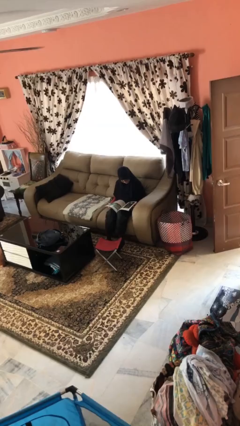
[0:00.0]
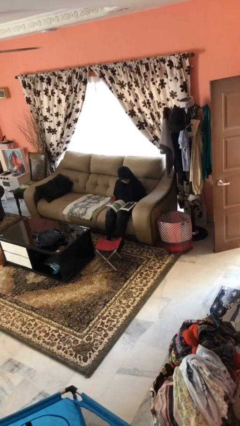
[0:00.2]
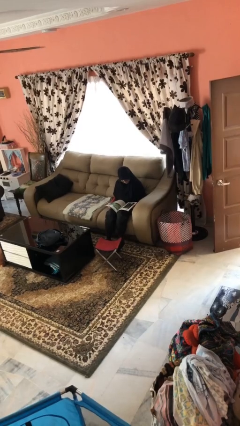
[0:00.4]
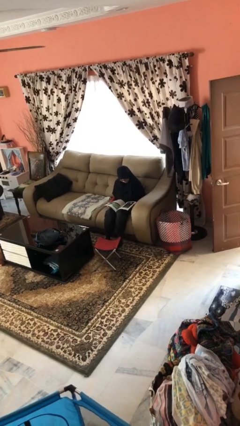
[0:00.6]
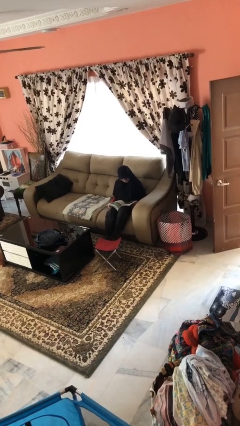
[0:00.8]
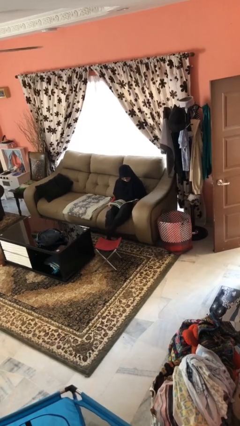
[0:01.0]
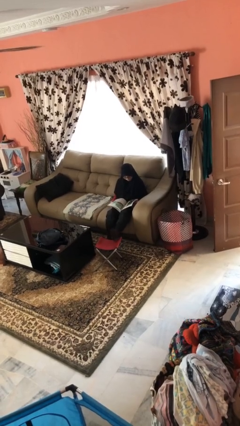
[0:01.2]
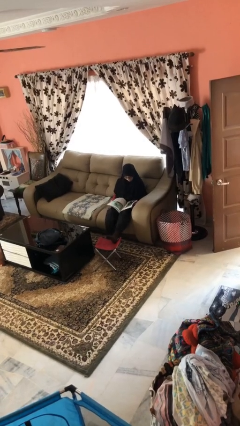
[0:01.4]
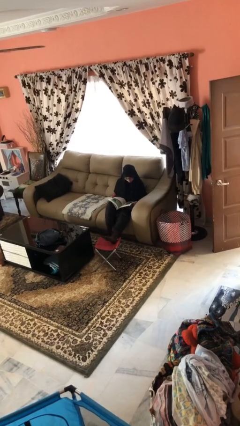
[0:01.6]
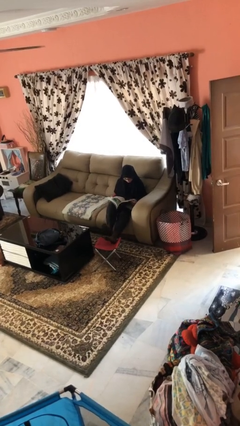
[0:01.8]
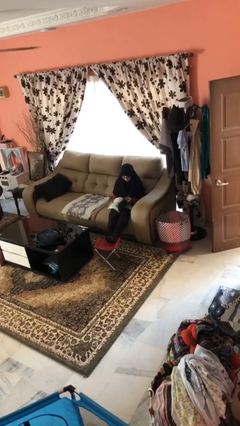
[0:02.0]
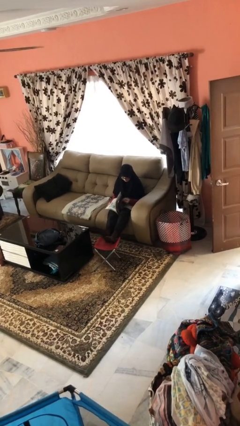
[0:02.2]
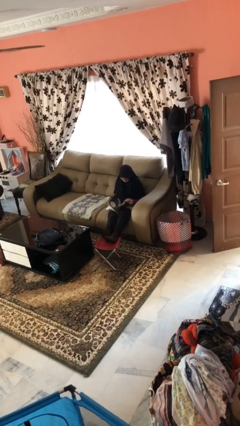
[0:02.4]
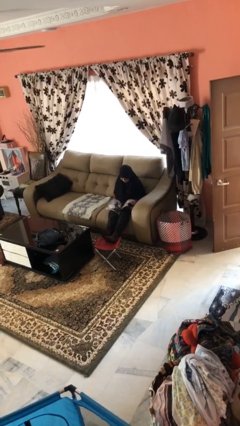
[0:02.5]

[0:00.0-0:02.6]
person puts feet up

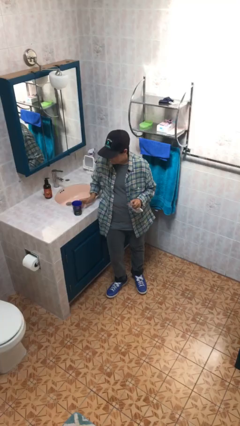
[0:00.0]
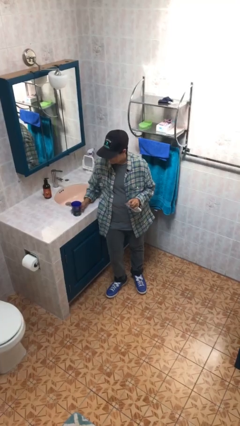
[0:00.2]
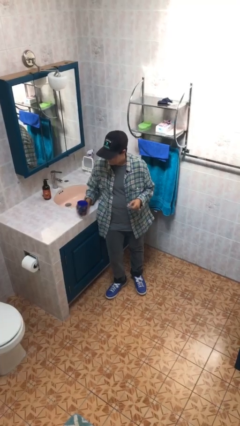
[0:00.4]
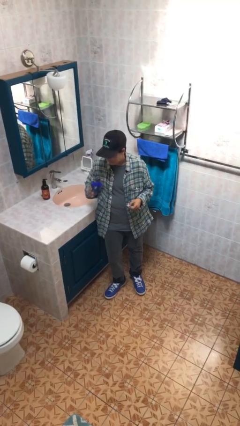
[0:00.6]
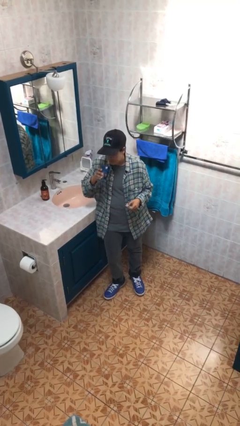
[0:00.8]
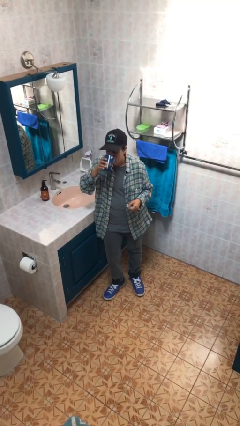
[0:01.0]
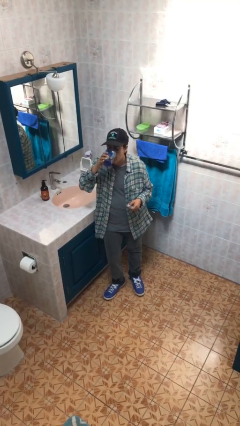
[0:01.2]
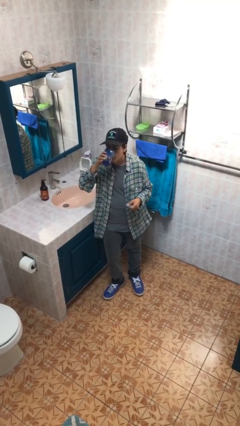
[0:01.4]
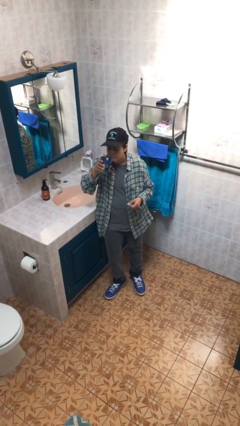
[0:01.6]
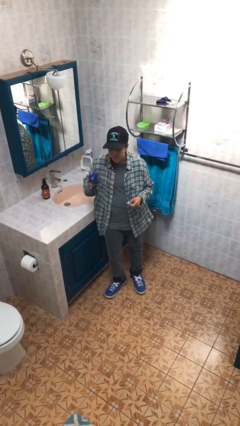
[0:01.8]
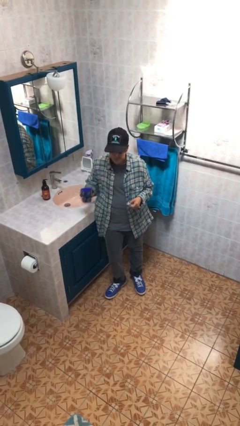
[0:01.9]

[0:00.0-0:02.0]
person drinks from cup

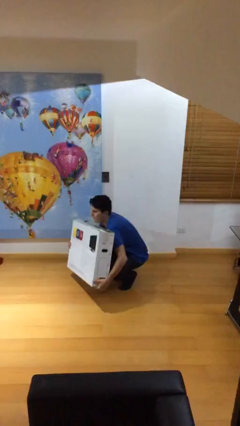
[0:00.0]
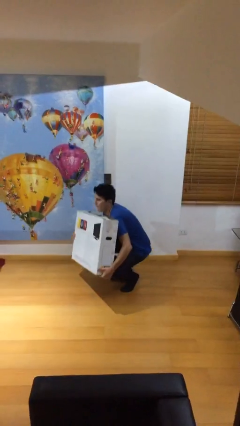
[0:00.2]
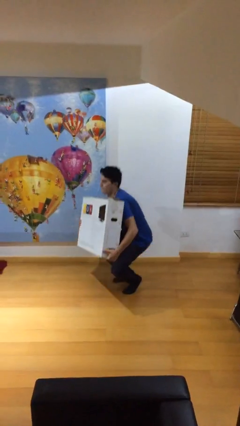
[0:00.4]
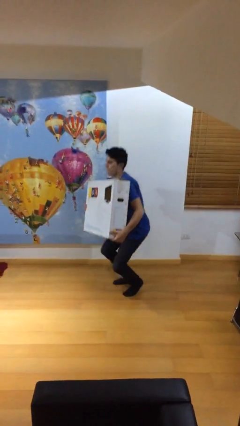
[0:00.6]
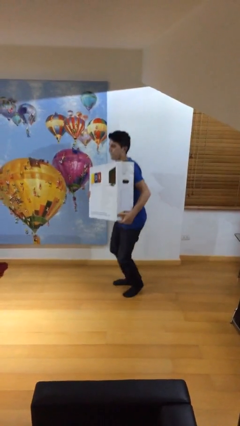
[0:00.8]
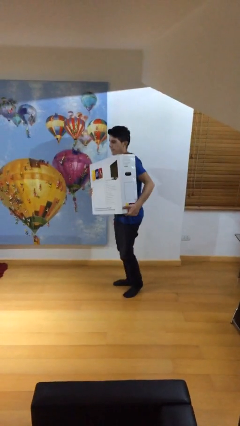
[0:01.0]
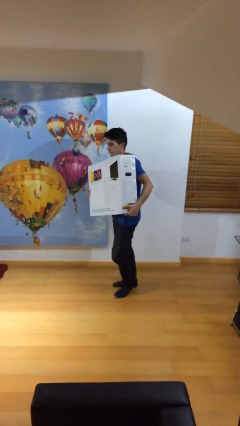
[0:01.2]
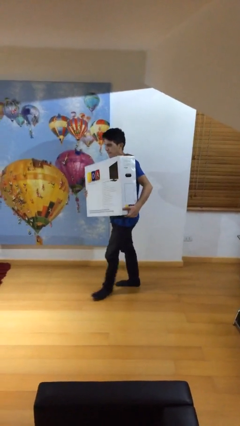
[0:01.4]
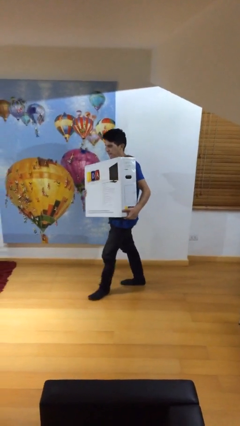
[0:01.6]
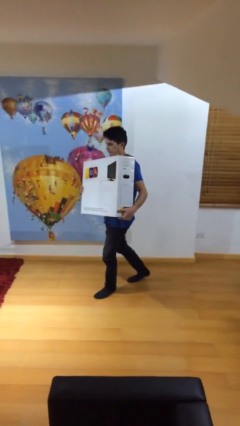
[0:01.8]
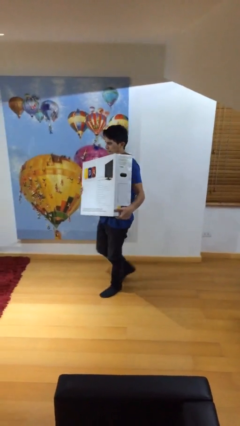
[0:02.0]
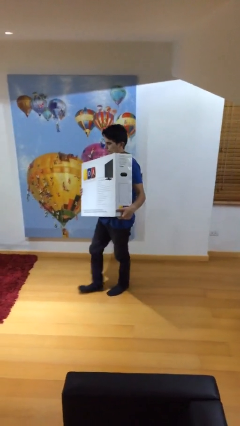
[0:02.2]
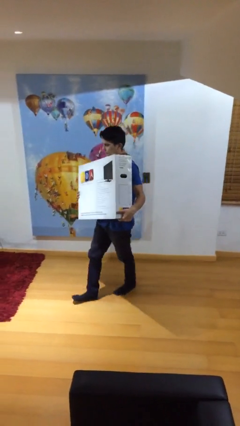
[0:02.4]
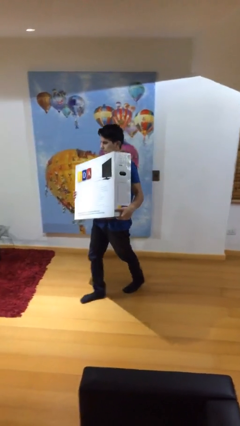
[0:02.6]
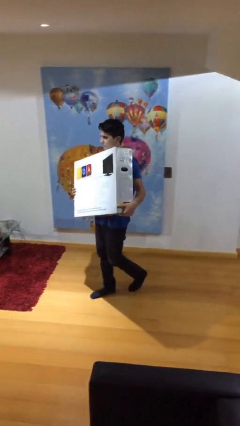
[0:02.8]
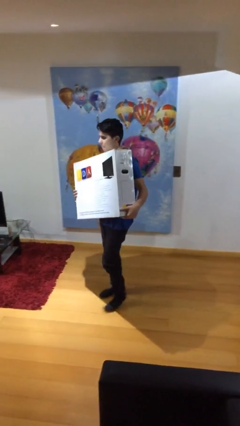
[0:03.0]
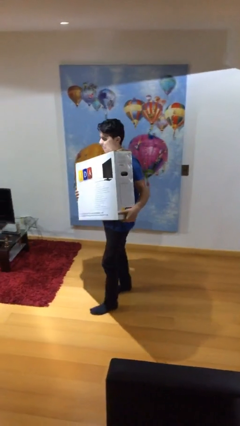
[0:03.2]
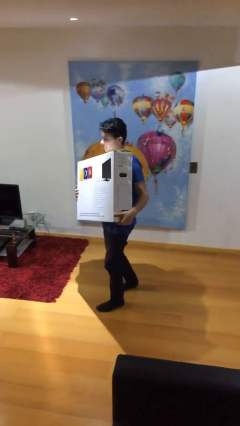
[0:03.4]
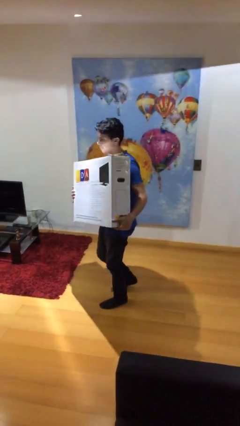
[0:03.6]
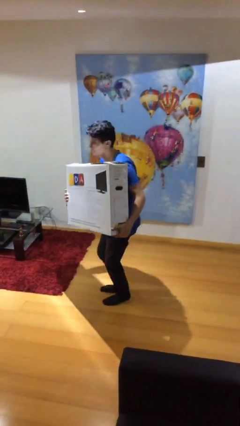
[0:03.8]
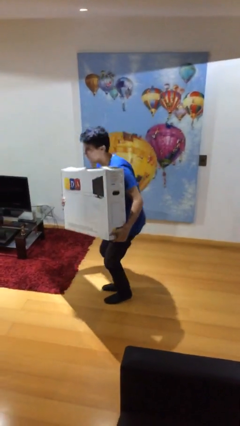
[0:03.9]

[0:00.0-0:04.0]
person carries heavy object

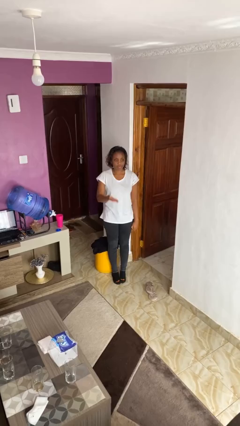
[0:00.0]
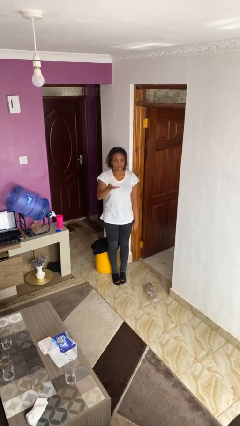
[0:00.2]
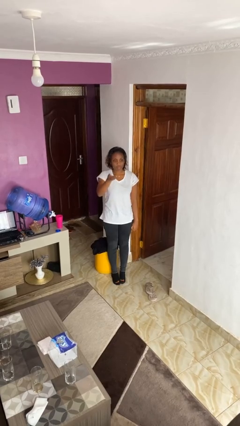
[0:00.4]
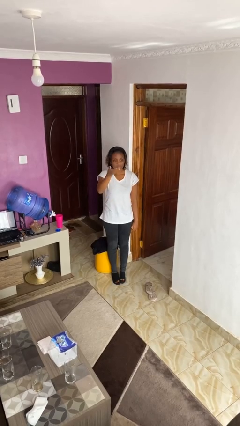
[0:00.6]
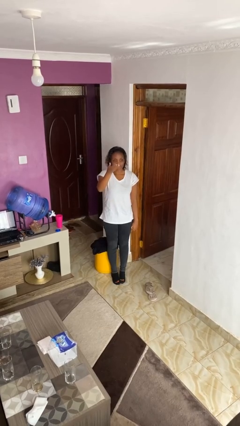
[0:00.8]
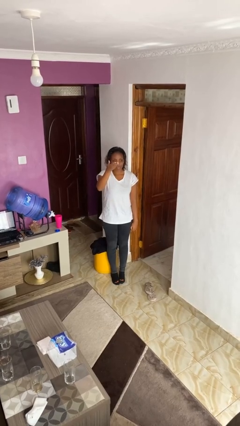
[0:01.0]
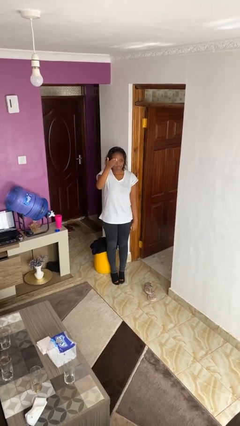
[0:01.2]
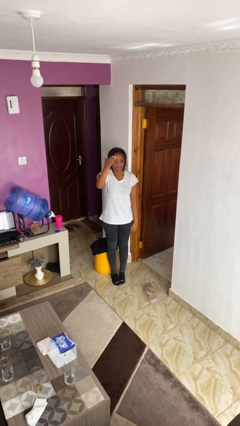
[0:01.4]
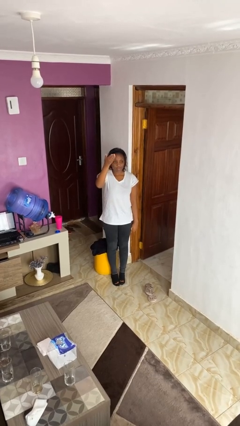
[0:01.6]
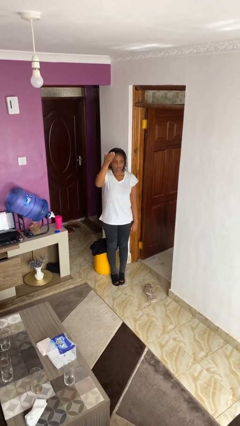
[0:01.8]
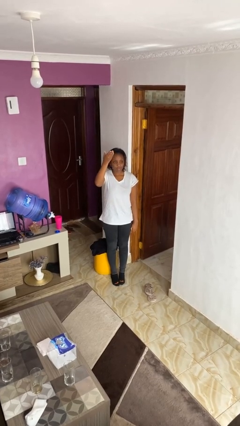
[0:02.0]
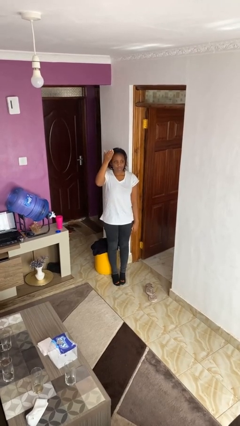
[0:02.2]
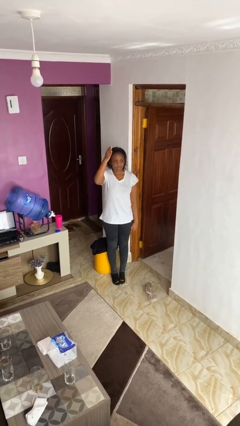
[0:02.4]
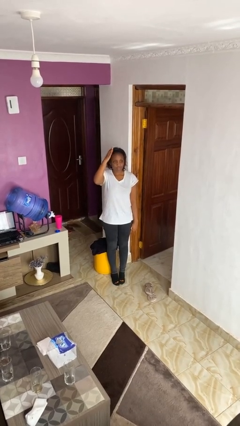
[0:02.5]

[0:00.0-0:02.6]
person gestures swipe up

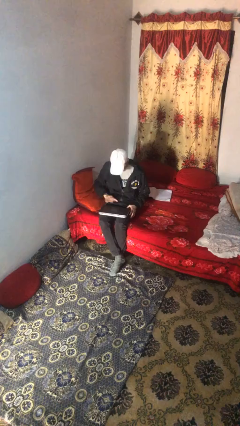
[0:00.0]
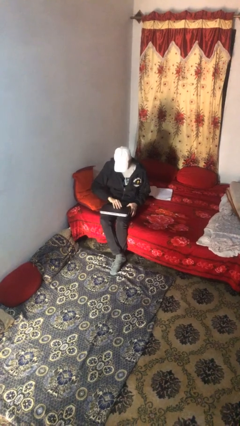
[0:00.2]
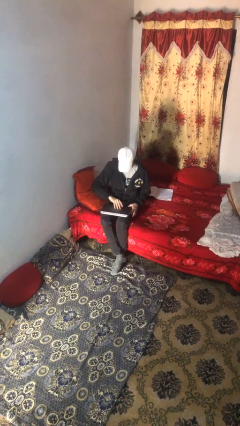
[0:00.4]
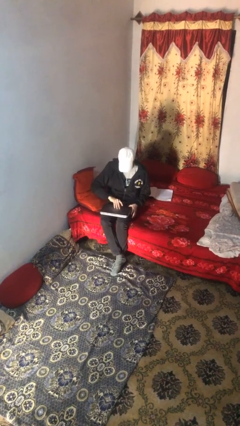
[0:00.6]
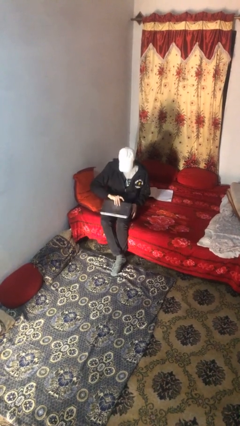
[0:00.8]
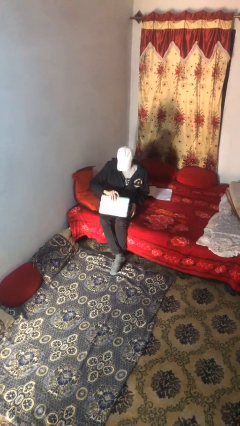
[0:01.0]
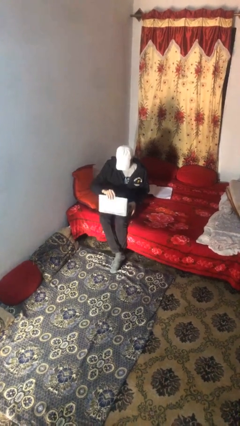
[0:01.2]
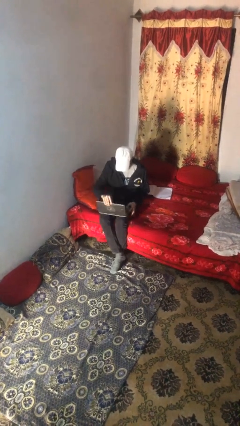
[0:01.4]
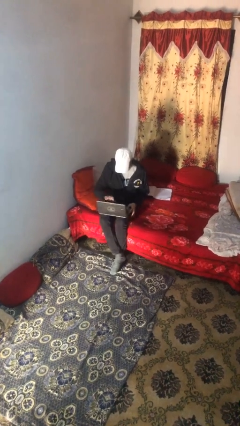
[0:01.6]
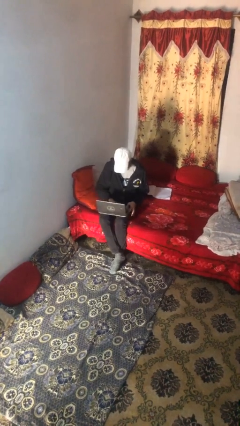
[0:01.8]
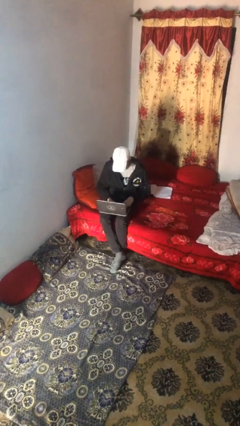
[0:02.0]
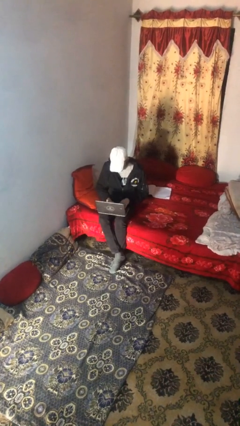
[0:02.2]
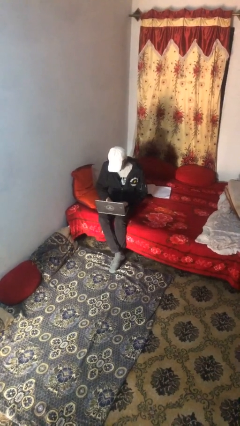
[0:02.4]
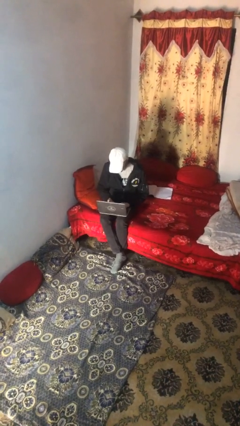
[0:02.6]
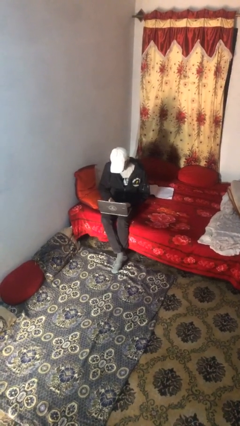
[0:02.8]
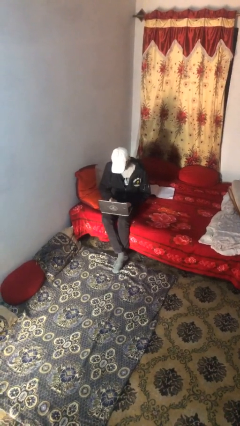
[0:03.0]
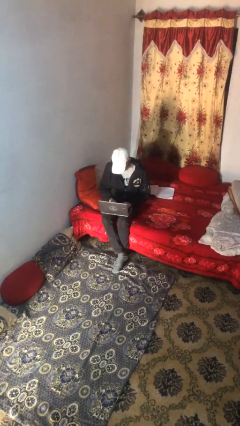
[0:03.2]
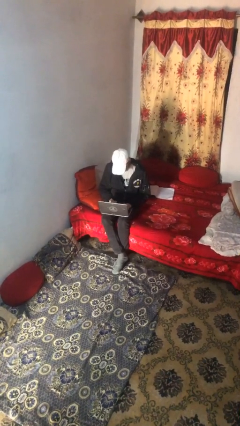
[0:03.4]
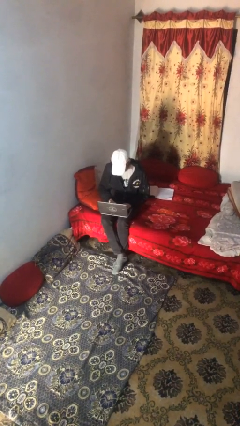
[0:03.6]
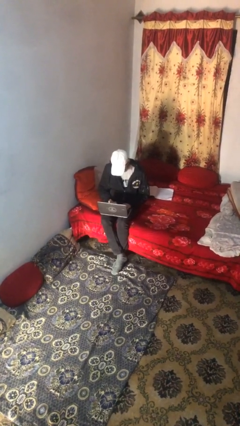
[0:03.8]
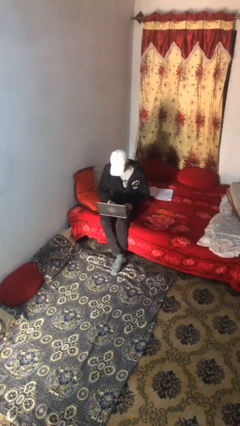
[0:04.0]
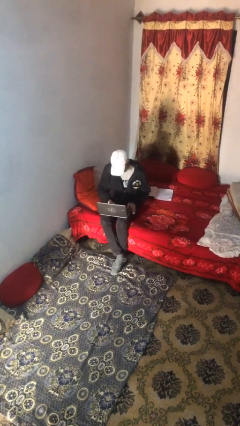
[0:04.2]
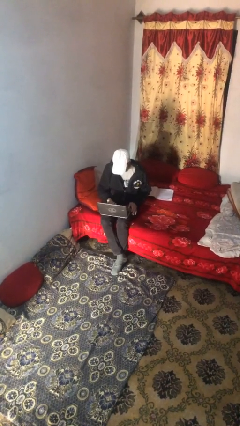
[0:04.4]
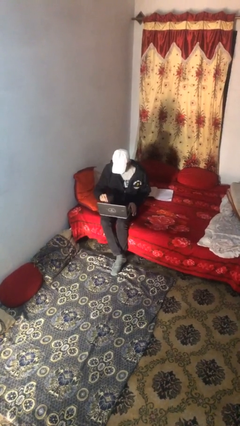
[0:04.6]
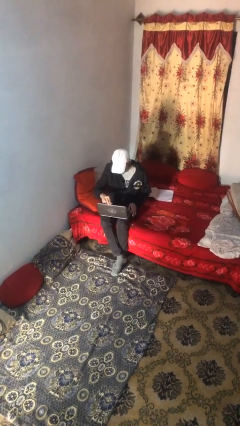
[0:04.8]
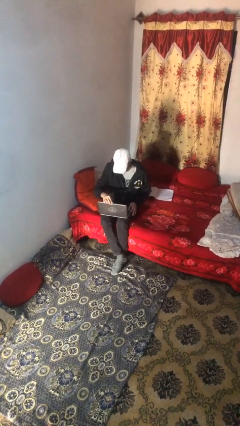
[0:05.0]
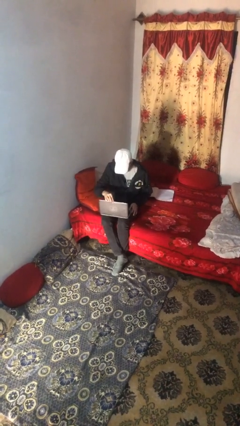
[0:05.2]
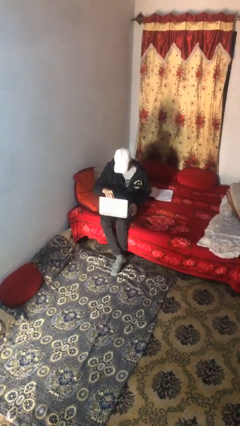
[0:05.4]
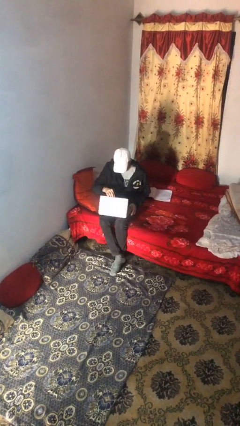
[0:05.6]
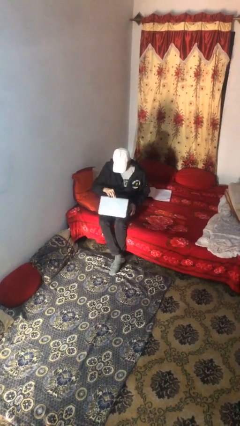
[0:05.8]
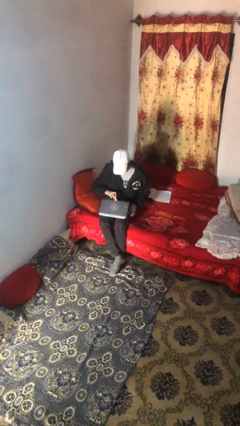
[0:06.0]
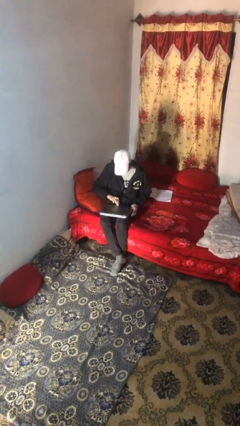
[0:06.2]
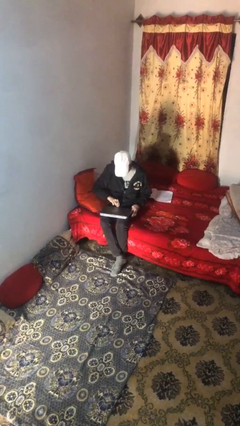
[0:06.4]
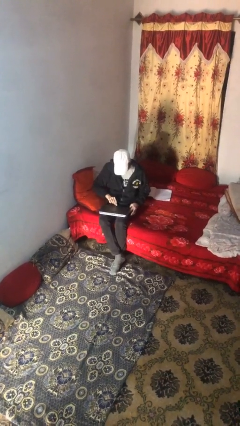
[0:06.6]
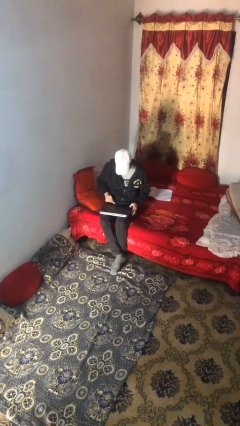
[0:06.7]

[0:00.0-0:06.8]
person interacts with laptop
